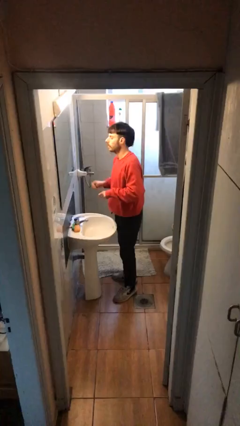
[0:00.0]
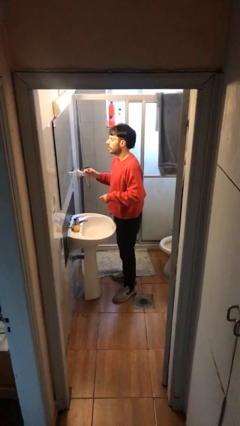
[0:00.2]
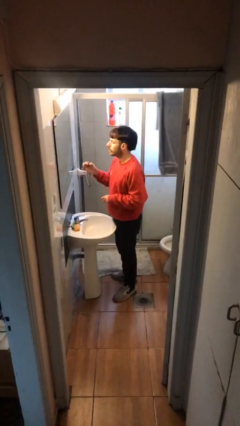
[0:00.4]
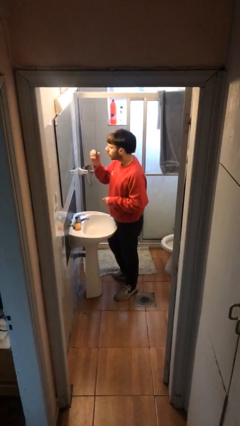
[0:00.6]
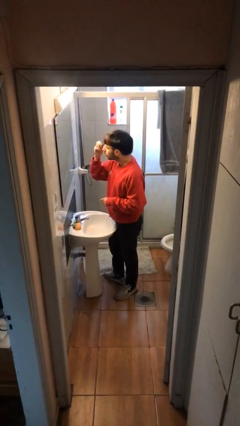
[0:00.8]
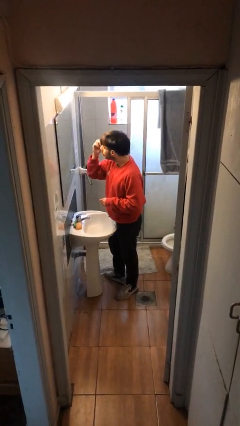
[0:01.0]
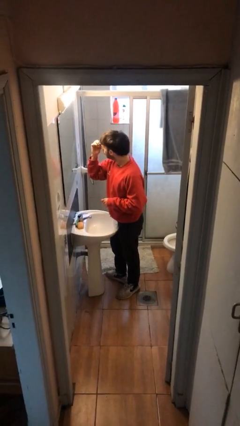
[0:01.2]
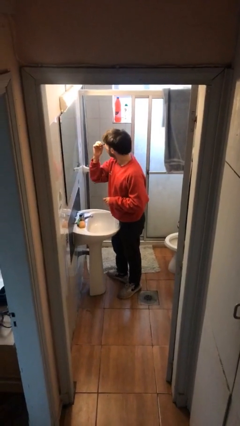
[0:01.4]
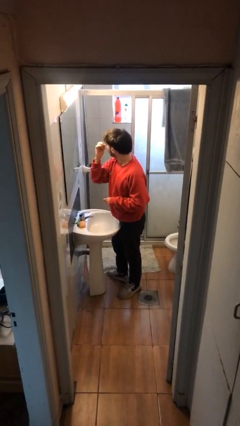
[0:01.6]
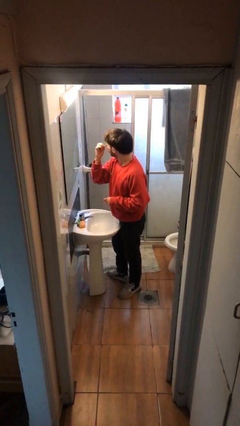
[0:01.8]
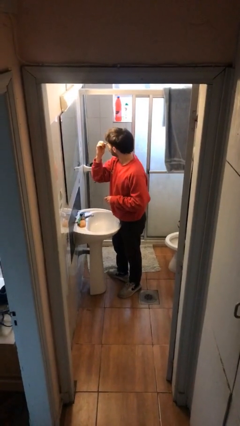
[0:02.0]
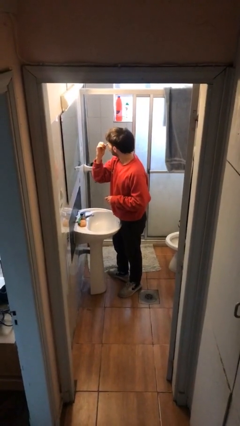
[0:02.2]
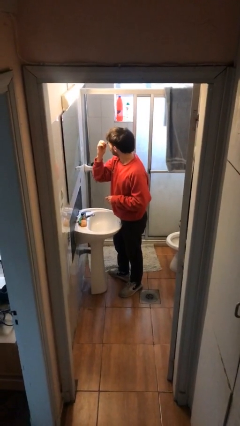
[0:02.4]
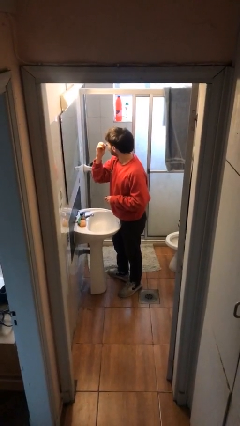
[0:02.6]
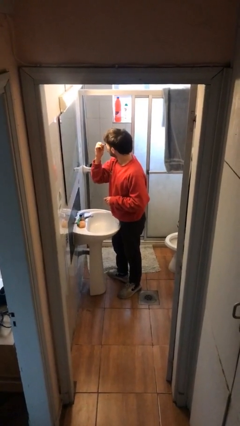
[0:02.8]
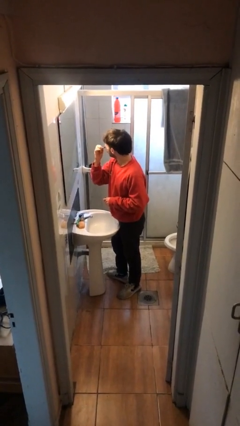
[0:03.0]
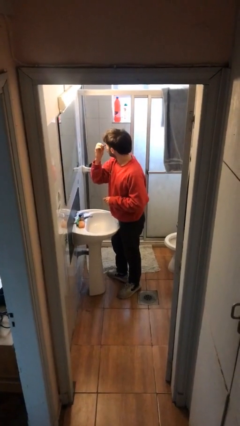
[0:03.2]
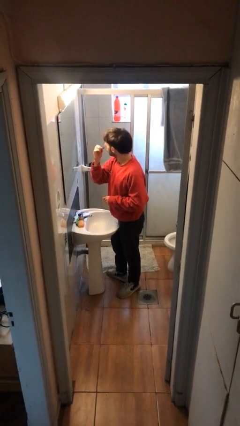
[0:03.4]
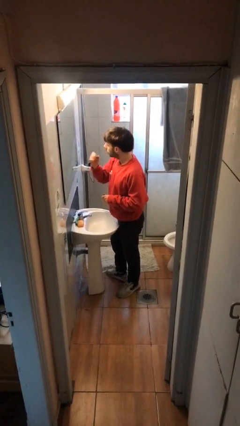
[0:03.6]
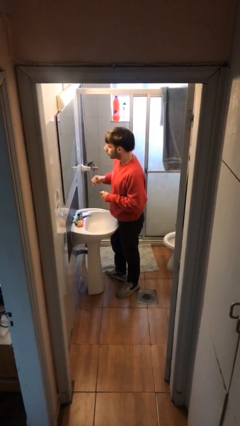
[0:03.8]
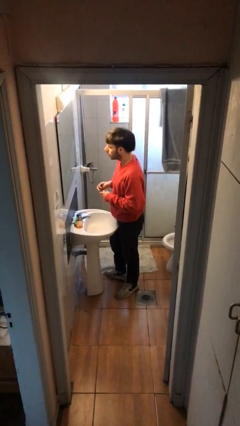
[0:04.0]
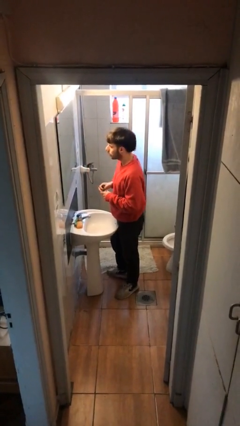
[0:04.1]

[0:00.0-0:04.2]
person applies eye makeup

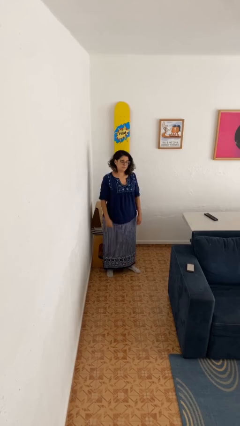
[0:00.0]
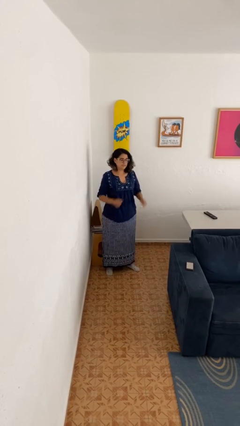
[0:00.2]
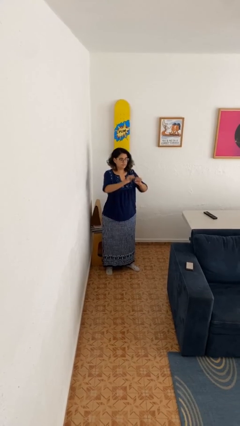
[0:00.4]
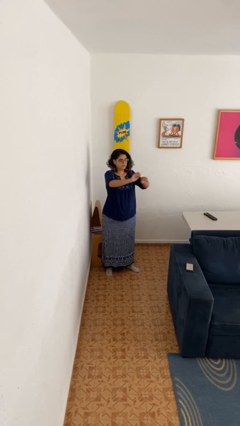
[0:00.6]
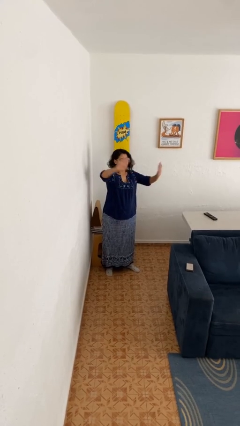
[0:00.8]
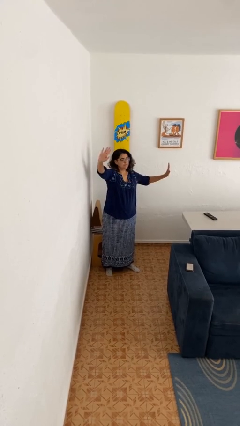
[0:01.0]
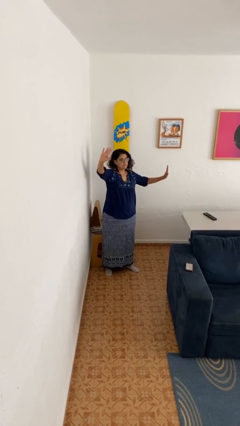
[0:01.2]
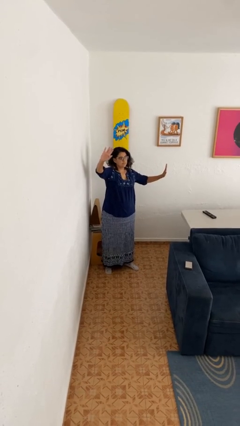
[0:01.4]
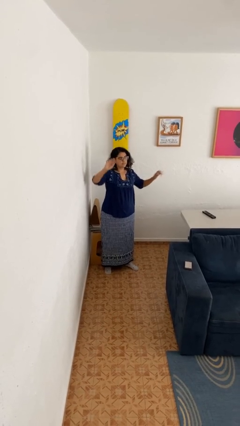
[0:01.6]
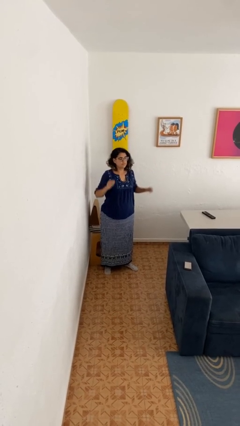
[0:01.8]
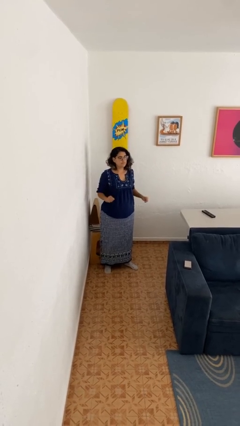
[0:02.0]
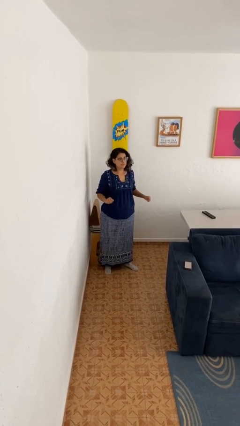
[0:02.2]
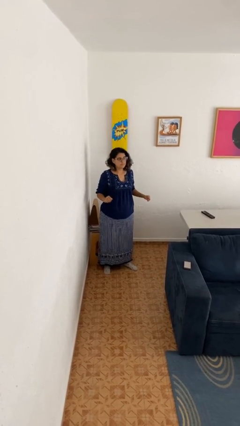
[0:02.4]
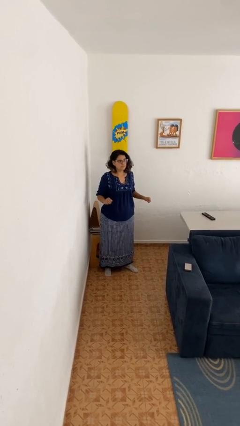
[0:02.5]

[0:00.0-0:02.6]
person gestures zoom in

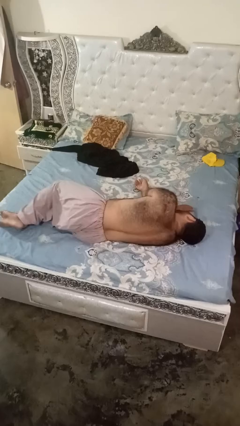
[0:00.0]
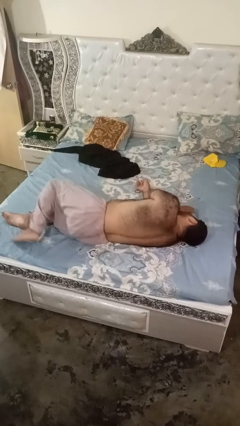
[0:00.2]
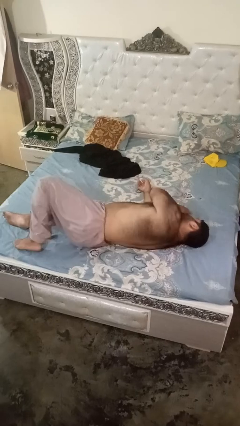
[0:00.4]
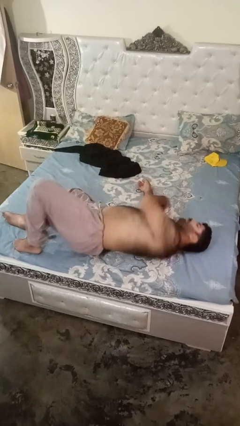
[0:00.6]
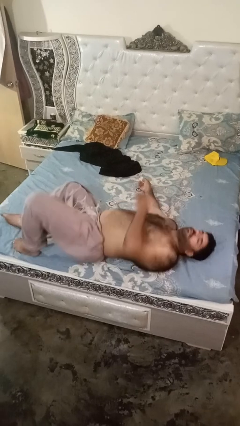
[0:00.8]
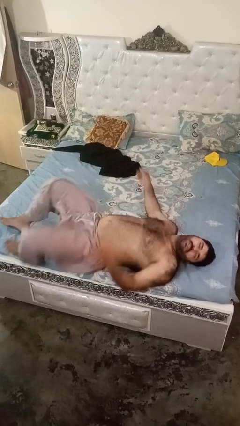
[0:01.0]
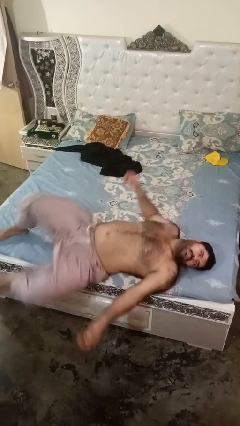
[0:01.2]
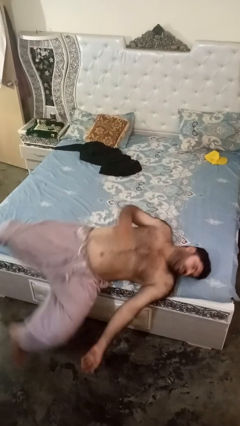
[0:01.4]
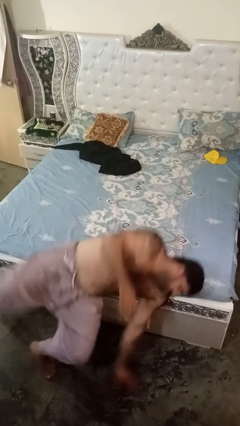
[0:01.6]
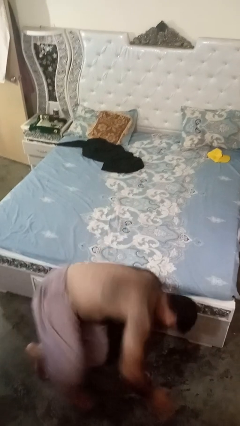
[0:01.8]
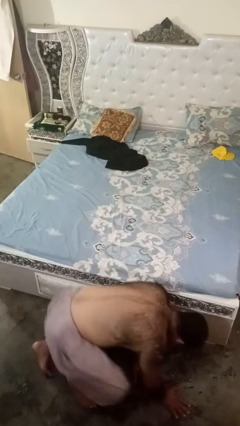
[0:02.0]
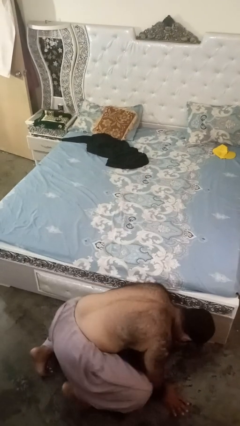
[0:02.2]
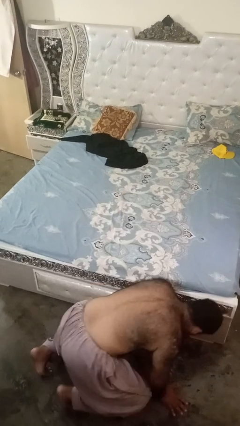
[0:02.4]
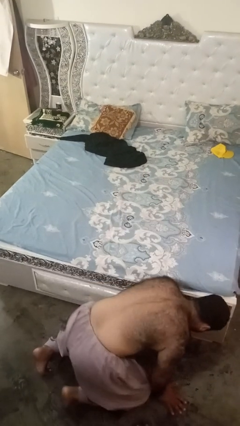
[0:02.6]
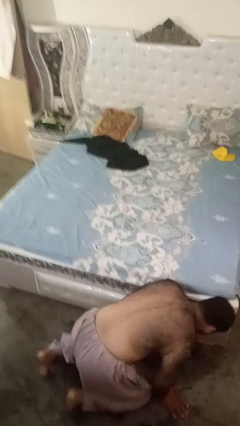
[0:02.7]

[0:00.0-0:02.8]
person falls from bed

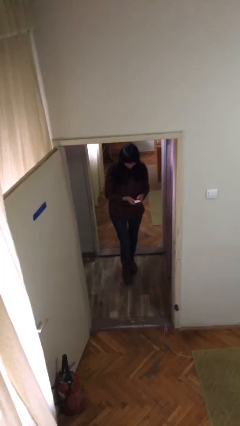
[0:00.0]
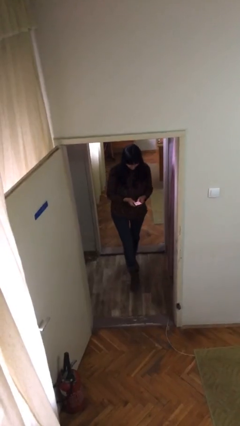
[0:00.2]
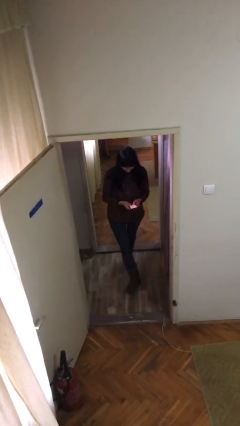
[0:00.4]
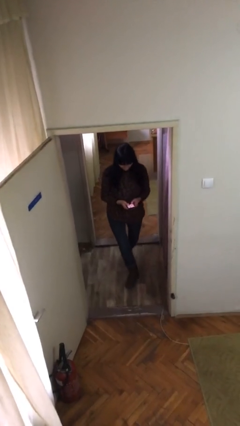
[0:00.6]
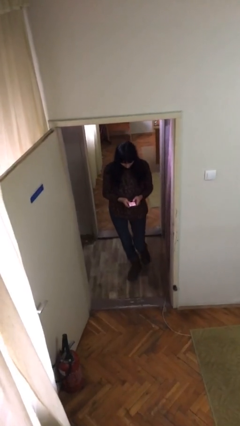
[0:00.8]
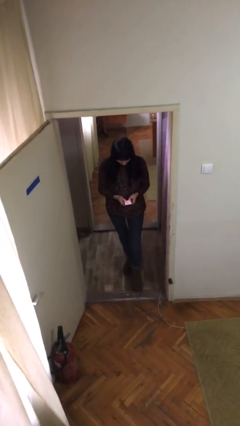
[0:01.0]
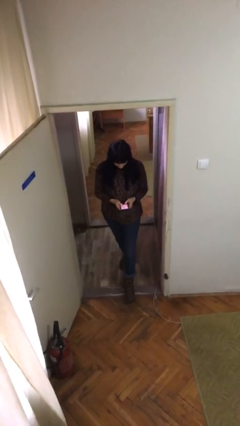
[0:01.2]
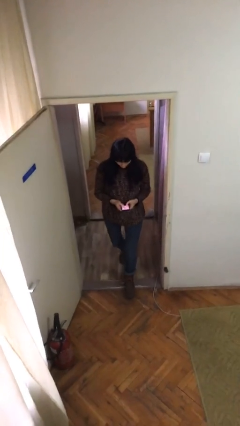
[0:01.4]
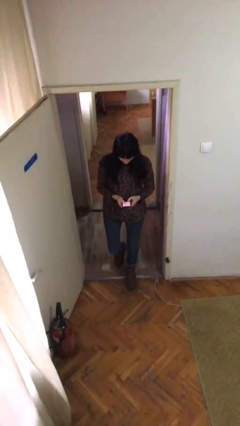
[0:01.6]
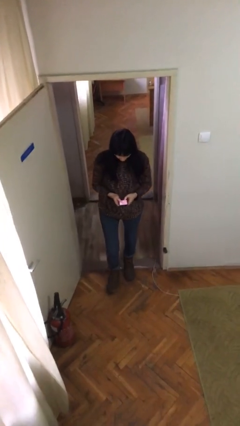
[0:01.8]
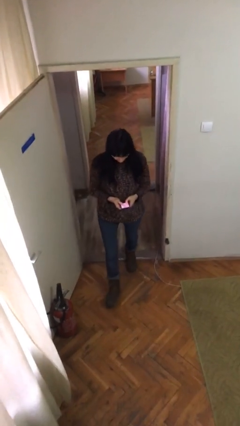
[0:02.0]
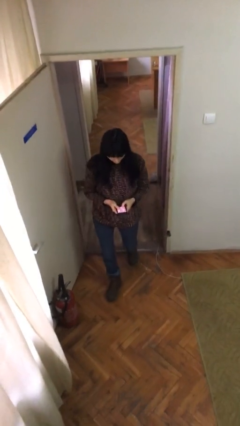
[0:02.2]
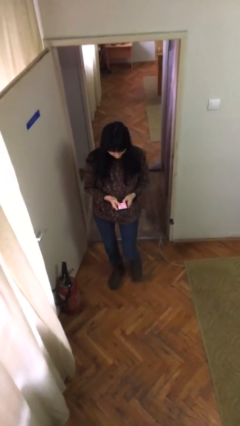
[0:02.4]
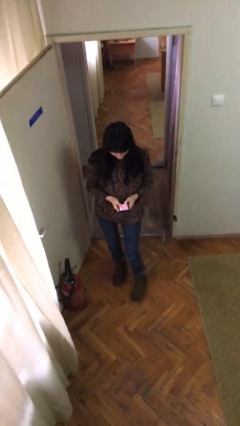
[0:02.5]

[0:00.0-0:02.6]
person enters scene through structure

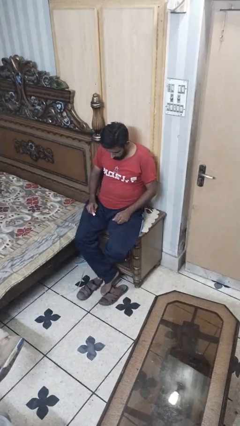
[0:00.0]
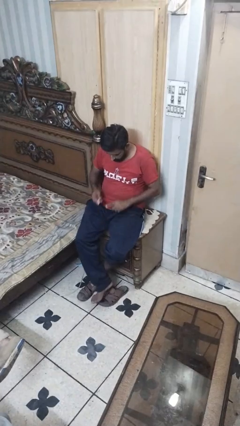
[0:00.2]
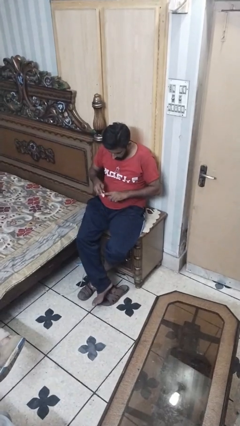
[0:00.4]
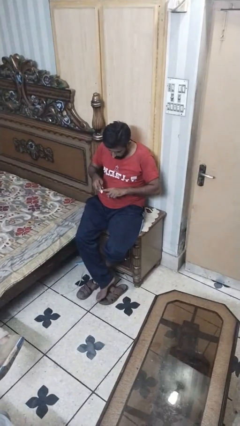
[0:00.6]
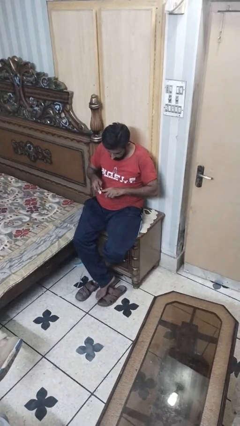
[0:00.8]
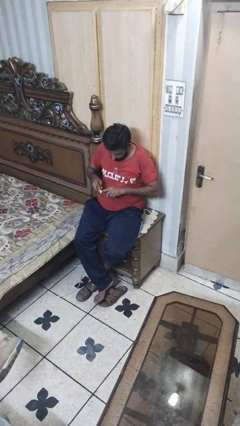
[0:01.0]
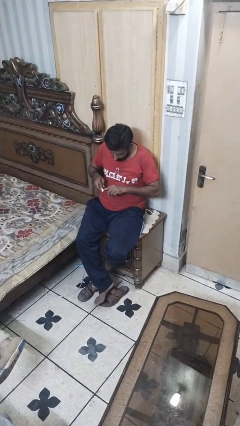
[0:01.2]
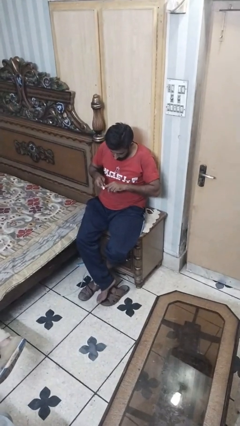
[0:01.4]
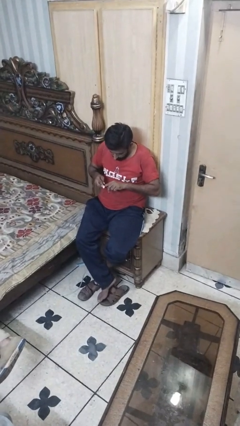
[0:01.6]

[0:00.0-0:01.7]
person files fingernails

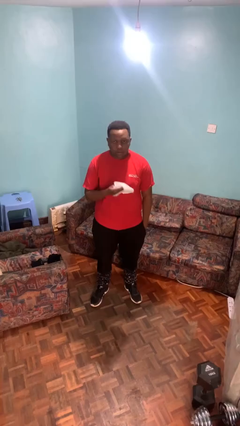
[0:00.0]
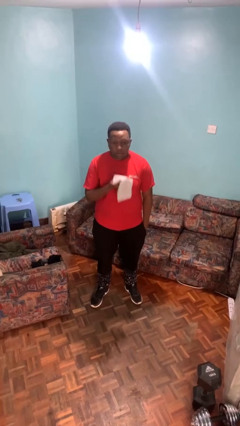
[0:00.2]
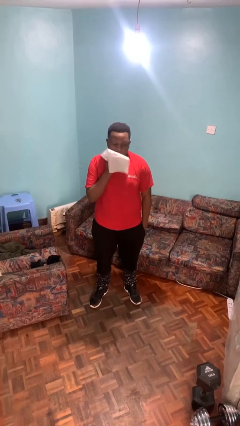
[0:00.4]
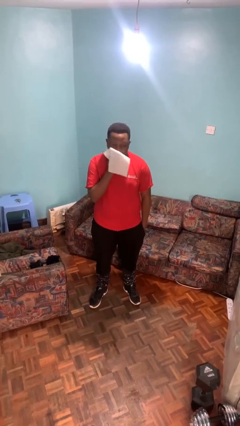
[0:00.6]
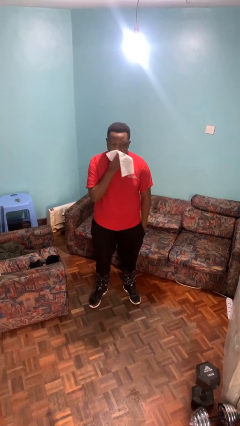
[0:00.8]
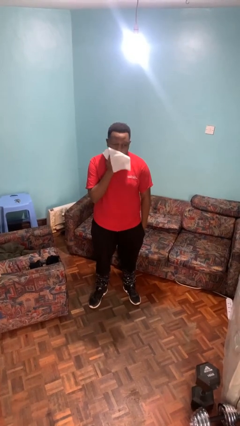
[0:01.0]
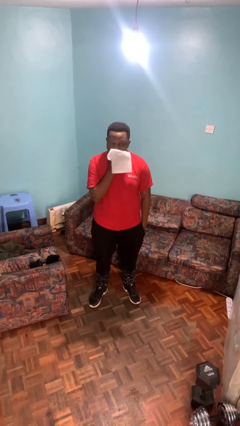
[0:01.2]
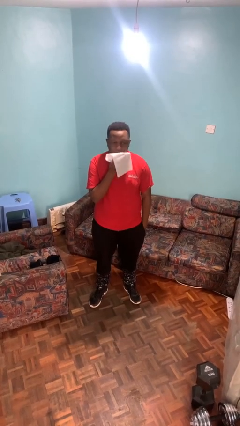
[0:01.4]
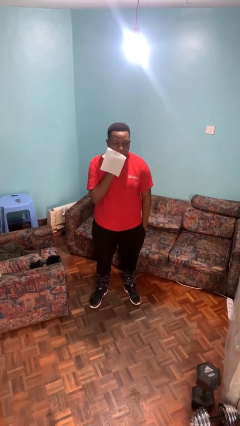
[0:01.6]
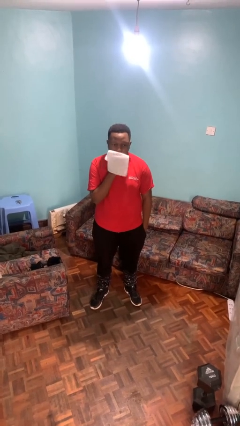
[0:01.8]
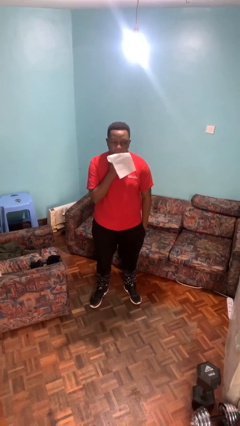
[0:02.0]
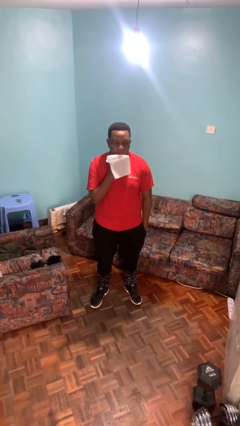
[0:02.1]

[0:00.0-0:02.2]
person wipes mouth with napkin

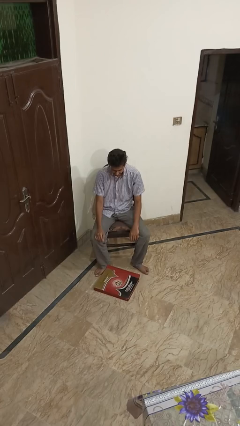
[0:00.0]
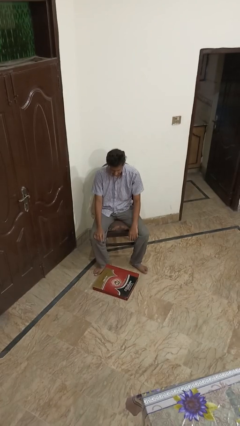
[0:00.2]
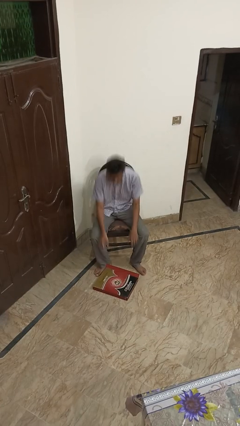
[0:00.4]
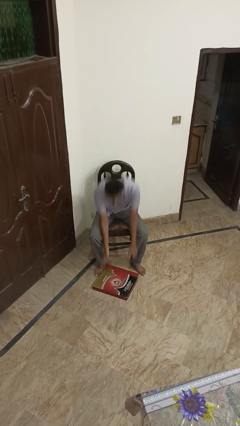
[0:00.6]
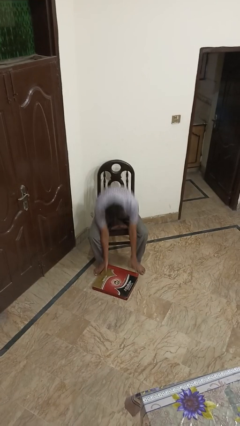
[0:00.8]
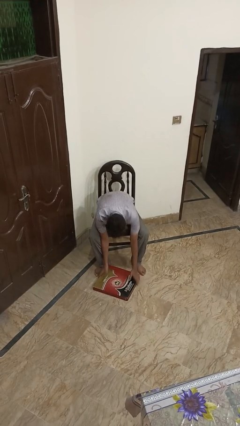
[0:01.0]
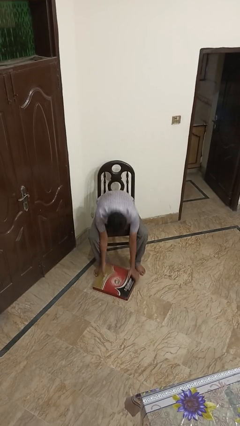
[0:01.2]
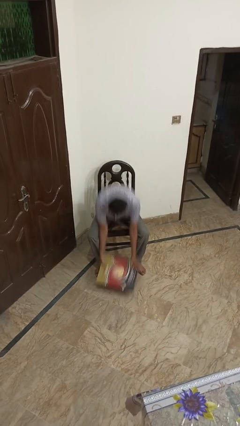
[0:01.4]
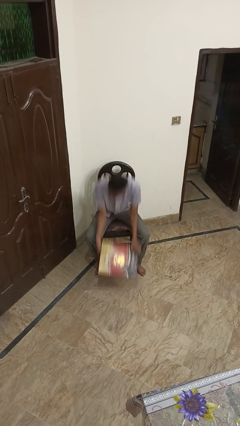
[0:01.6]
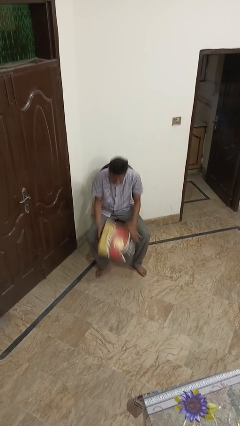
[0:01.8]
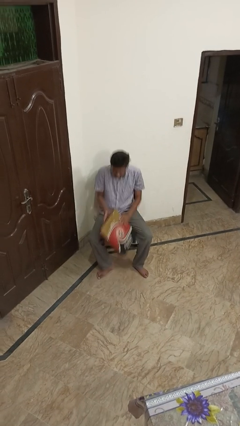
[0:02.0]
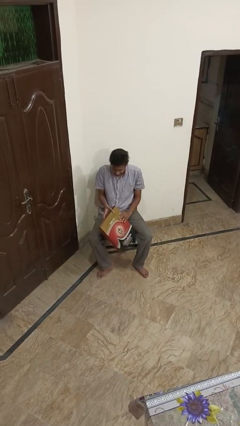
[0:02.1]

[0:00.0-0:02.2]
person picks up object from floor
